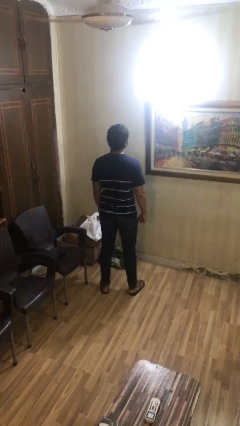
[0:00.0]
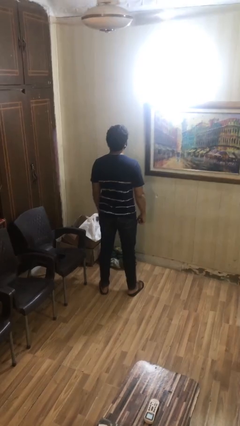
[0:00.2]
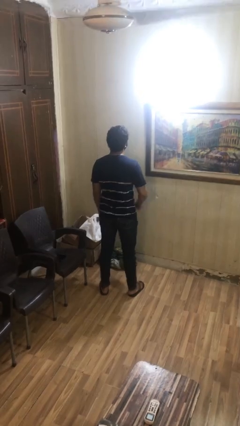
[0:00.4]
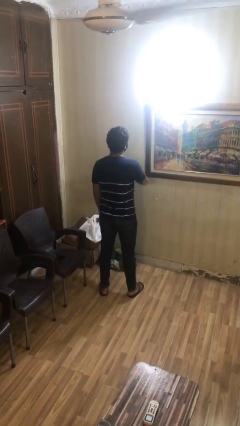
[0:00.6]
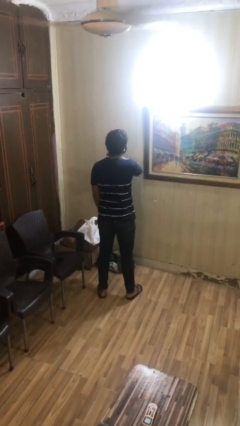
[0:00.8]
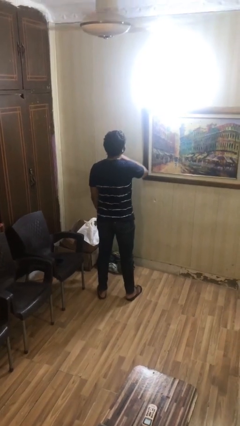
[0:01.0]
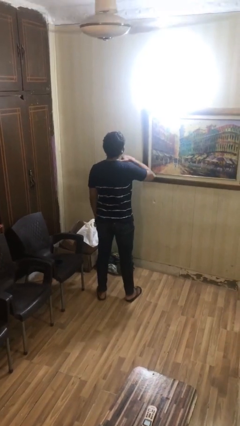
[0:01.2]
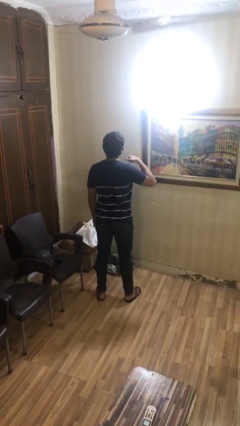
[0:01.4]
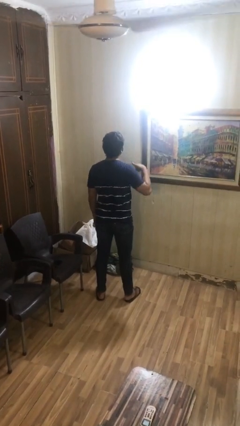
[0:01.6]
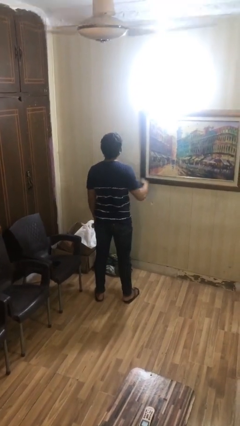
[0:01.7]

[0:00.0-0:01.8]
person gestures cut

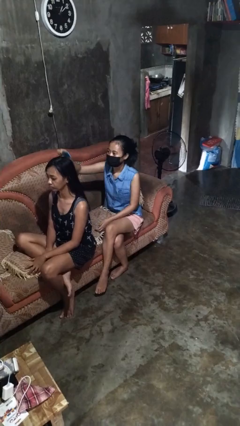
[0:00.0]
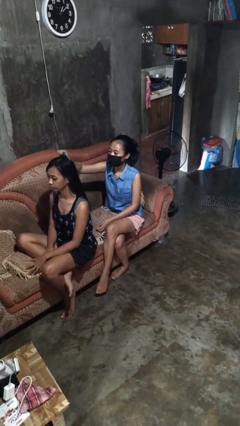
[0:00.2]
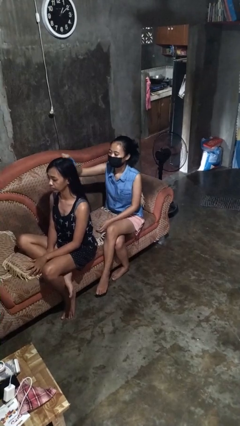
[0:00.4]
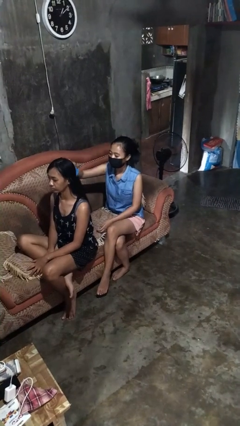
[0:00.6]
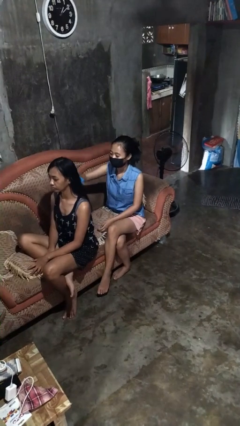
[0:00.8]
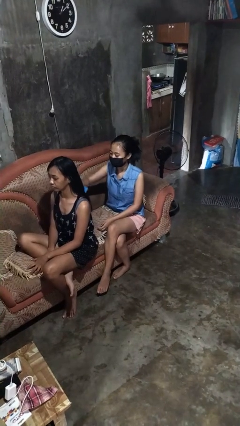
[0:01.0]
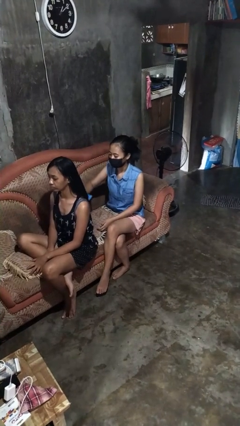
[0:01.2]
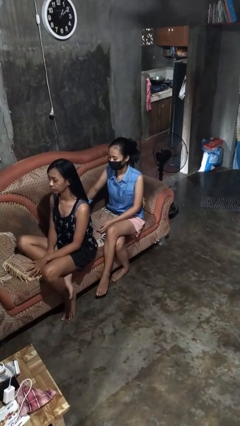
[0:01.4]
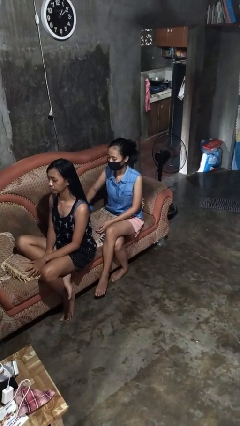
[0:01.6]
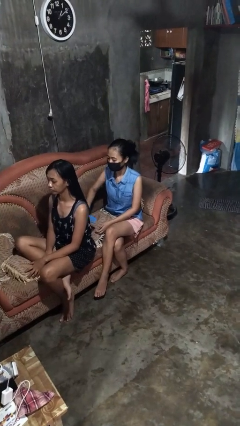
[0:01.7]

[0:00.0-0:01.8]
person brushes hair of person

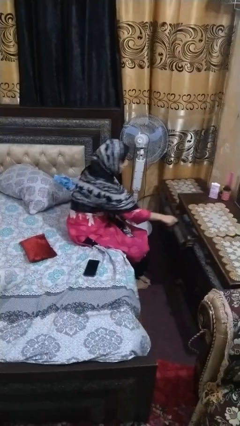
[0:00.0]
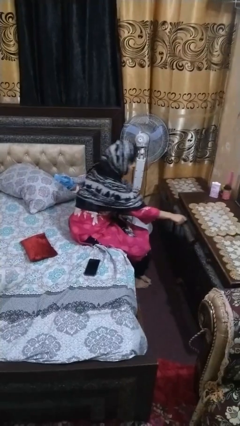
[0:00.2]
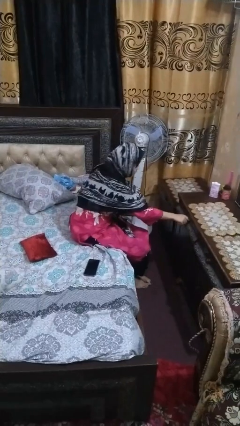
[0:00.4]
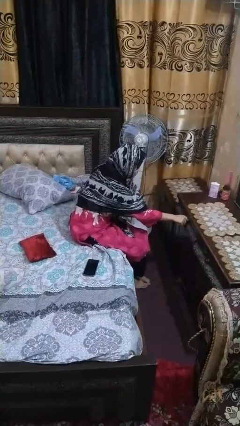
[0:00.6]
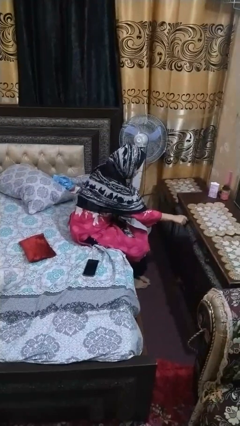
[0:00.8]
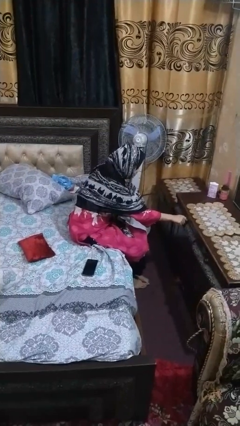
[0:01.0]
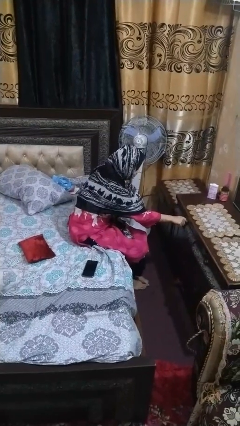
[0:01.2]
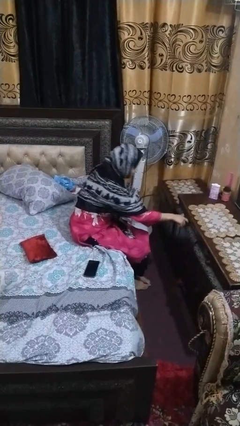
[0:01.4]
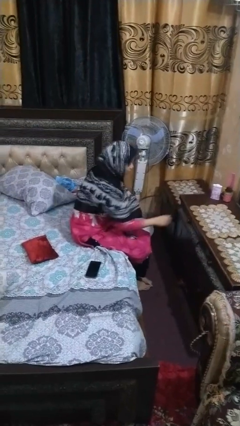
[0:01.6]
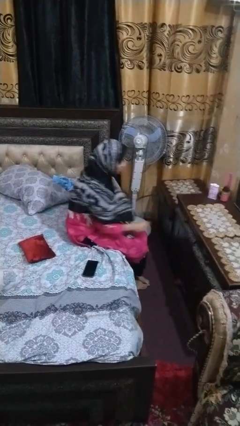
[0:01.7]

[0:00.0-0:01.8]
person closes dresser drawer

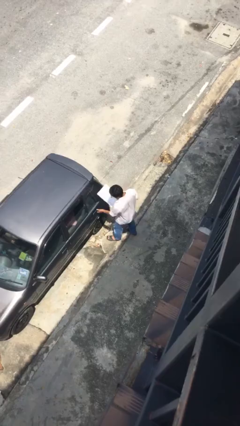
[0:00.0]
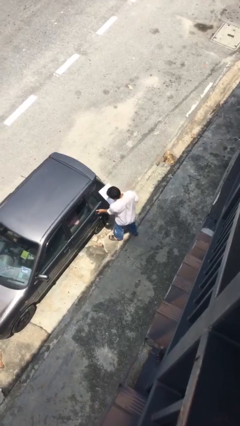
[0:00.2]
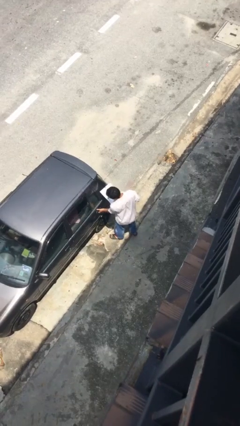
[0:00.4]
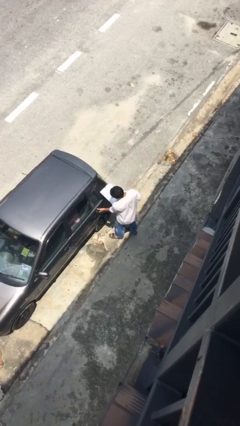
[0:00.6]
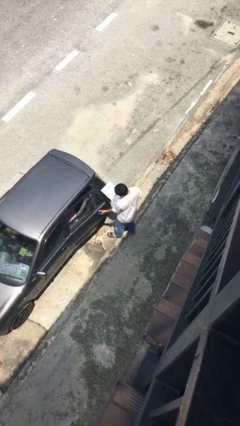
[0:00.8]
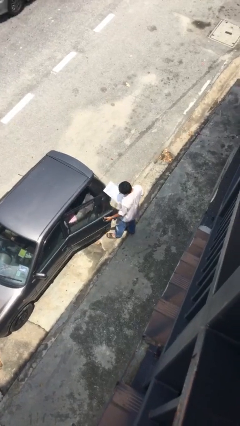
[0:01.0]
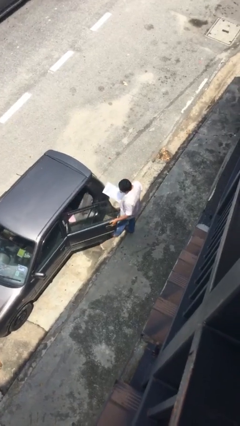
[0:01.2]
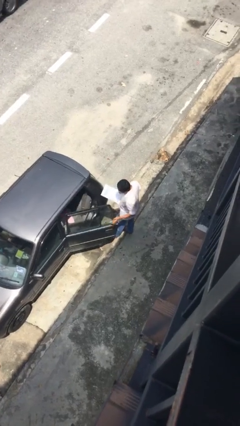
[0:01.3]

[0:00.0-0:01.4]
person opens car door

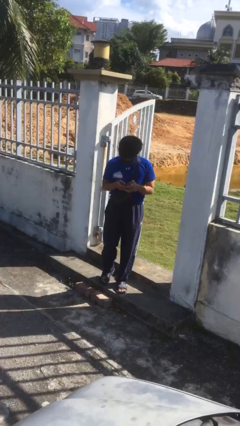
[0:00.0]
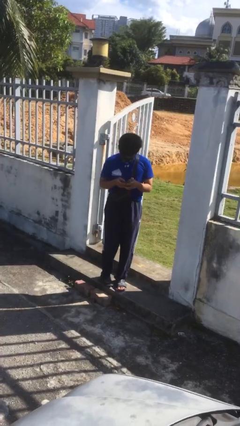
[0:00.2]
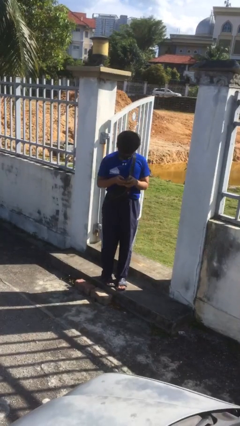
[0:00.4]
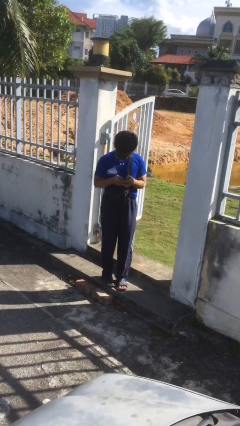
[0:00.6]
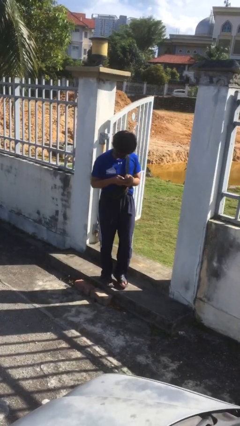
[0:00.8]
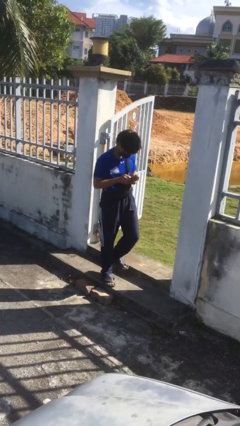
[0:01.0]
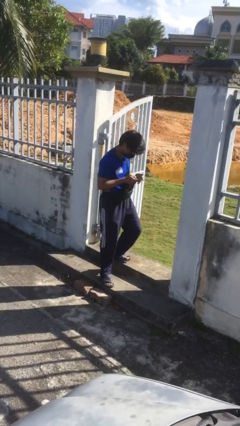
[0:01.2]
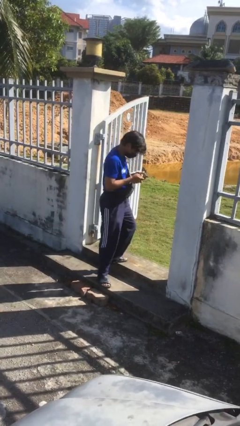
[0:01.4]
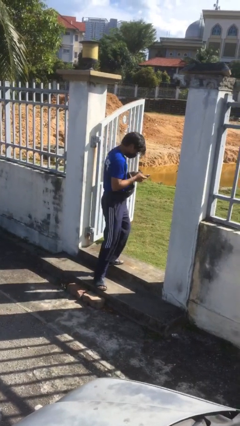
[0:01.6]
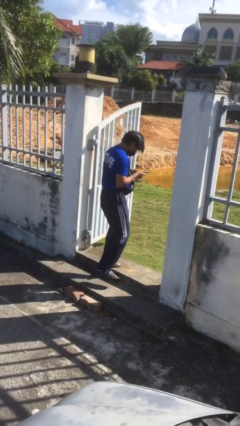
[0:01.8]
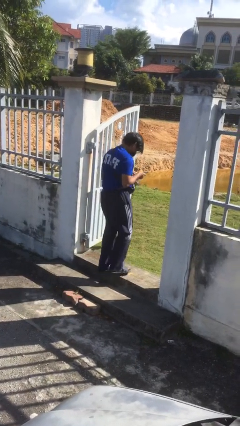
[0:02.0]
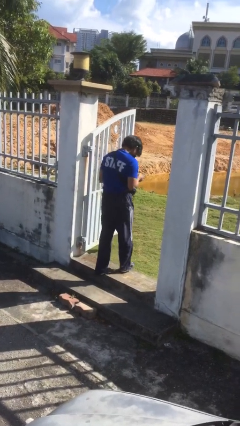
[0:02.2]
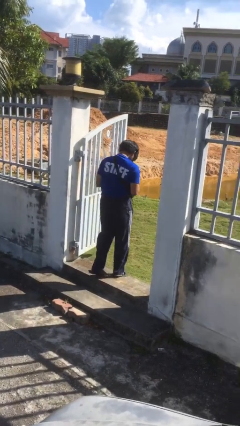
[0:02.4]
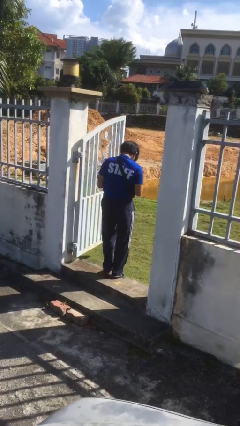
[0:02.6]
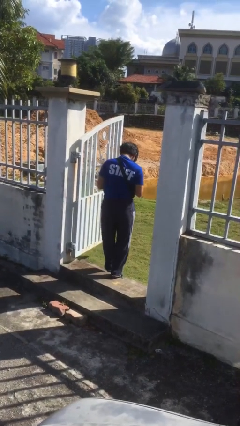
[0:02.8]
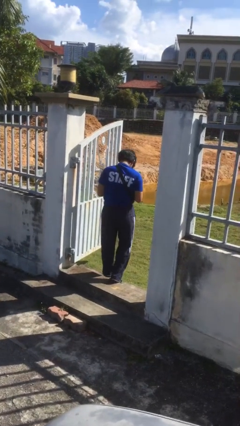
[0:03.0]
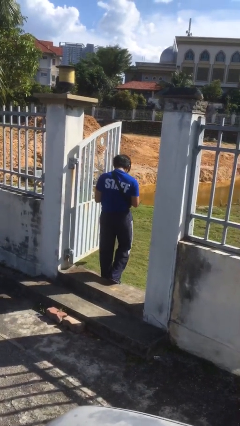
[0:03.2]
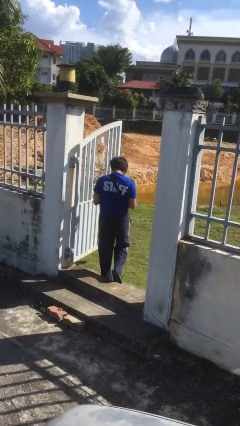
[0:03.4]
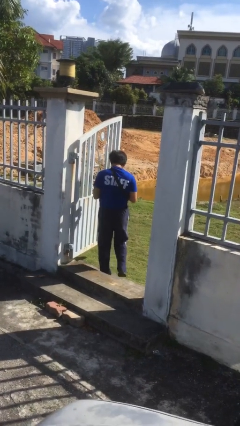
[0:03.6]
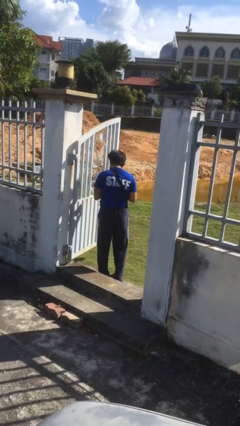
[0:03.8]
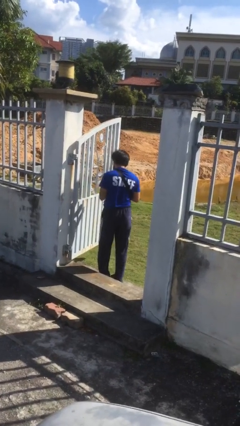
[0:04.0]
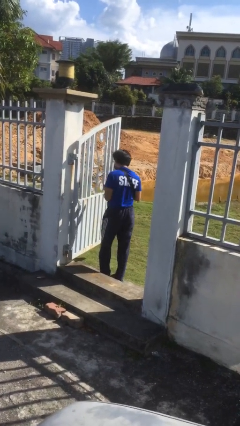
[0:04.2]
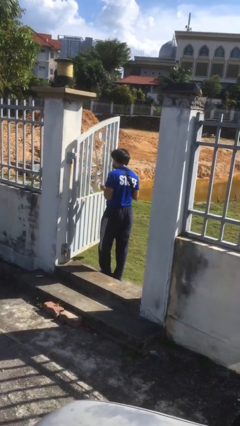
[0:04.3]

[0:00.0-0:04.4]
person exits scene through structure

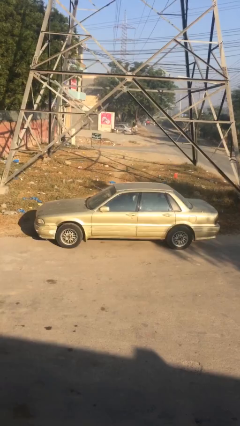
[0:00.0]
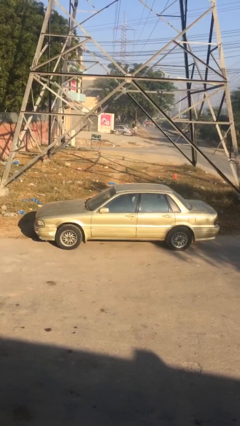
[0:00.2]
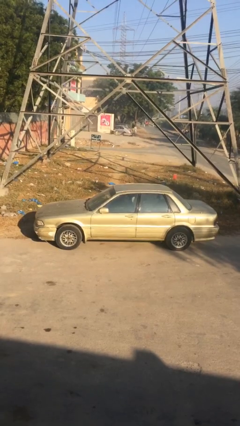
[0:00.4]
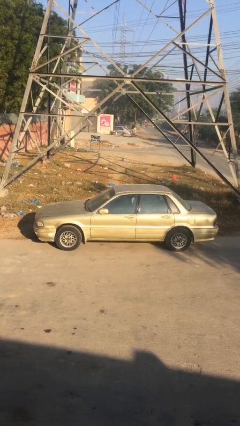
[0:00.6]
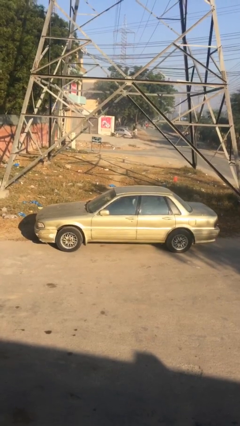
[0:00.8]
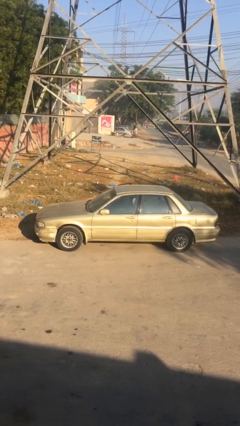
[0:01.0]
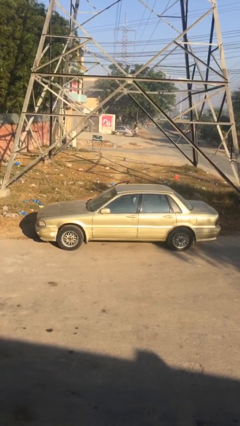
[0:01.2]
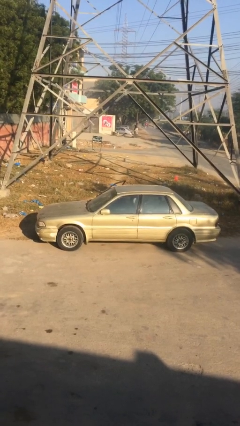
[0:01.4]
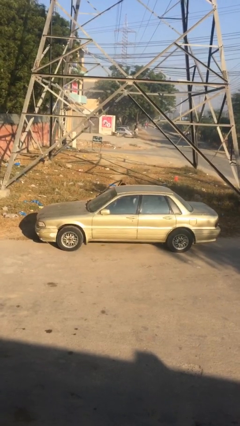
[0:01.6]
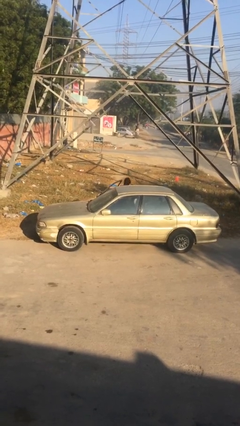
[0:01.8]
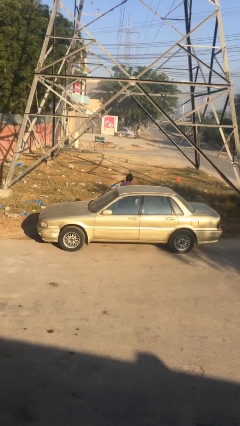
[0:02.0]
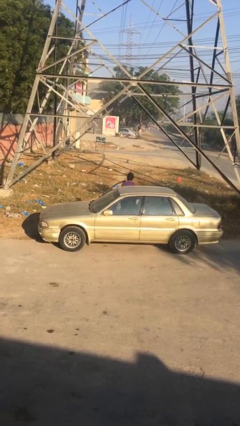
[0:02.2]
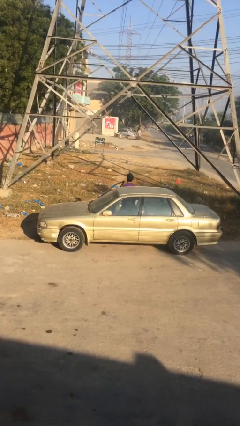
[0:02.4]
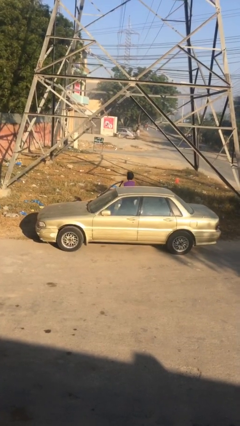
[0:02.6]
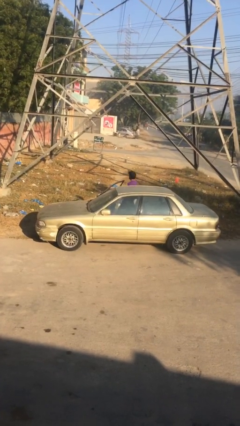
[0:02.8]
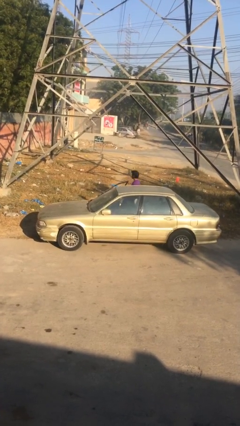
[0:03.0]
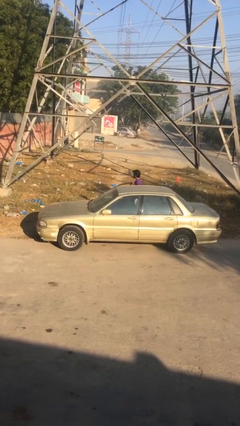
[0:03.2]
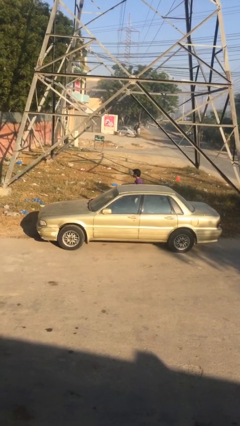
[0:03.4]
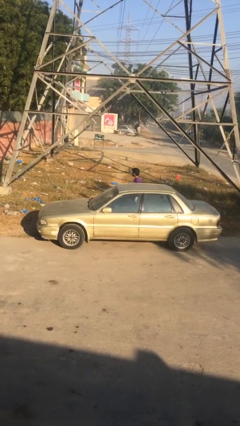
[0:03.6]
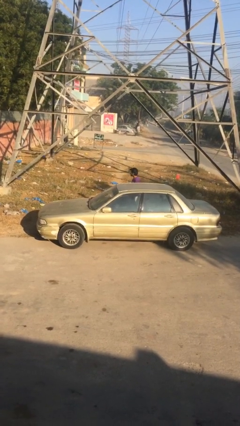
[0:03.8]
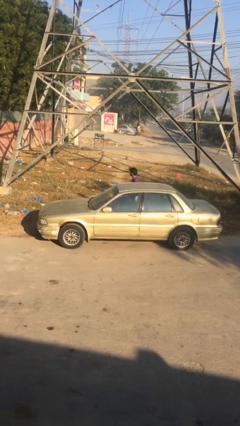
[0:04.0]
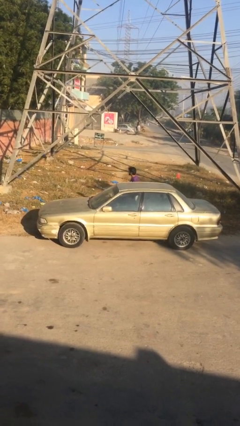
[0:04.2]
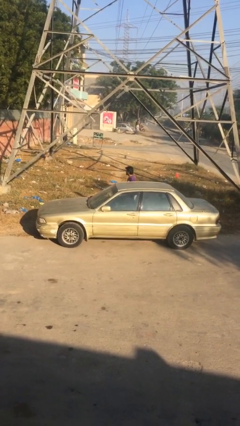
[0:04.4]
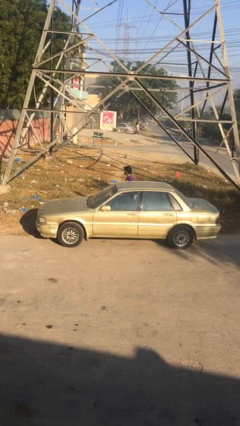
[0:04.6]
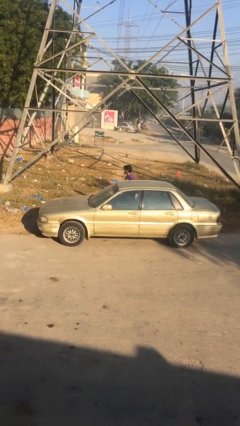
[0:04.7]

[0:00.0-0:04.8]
car drops off person

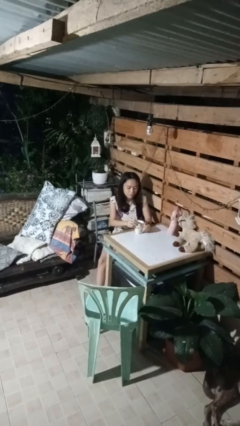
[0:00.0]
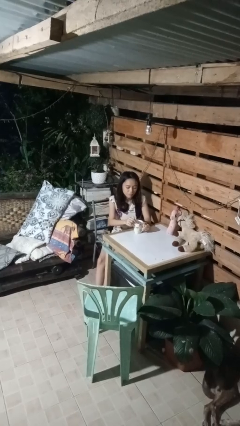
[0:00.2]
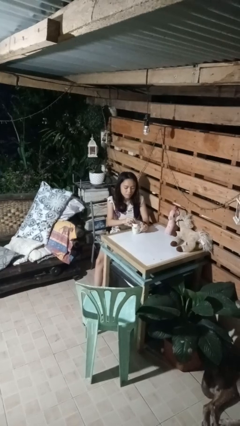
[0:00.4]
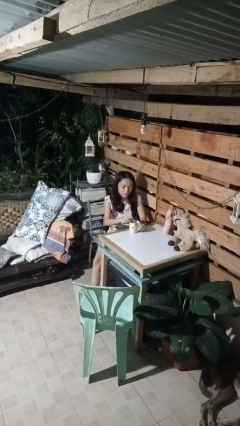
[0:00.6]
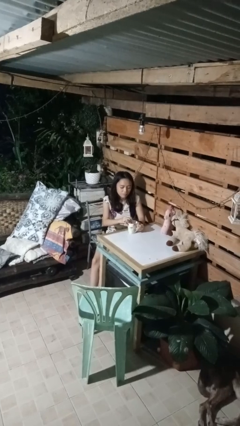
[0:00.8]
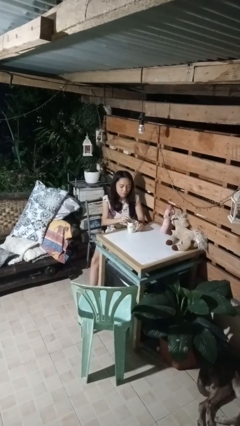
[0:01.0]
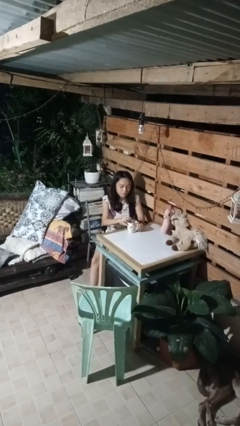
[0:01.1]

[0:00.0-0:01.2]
person stirs mug
